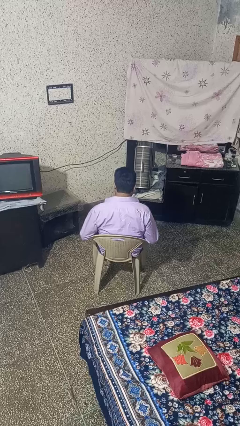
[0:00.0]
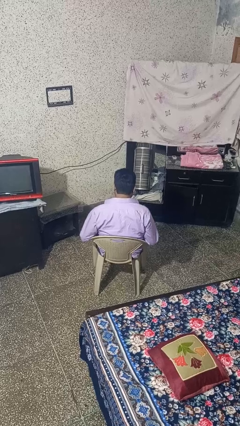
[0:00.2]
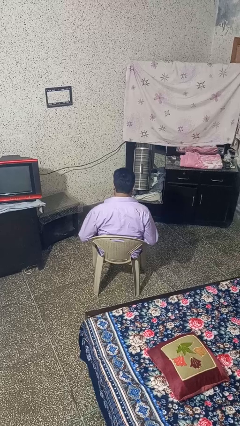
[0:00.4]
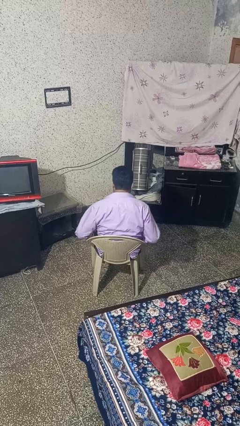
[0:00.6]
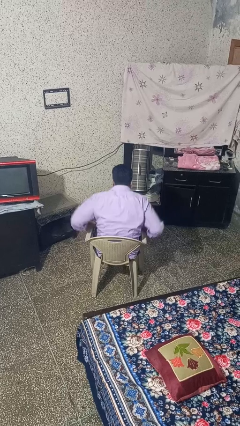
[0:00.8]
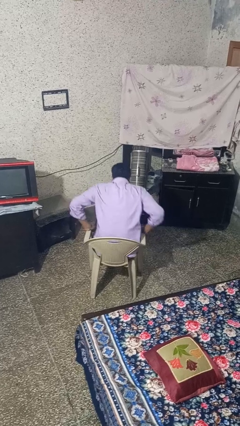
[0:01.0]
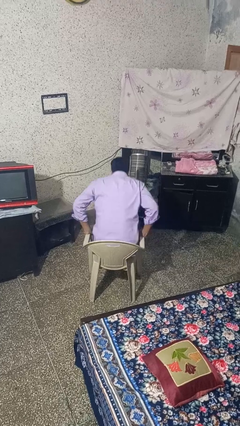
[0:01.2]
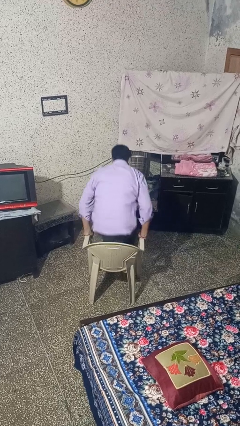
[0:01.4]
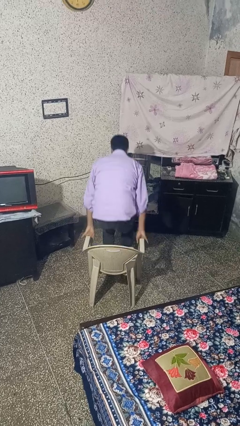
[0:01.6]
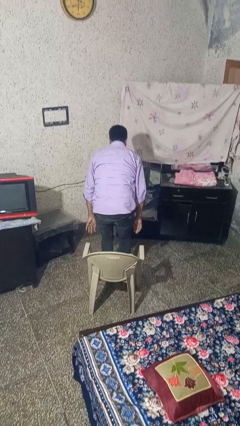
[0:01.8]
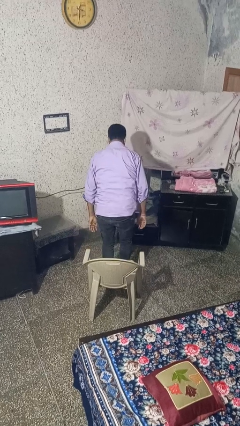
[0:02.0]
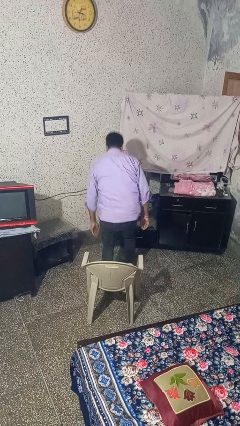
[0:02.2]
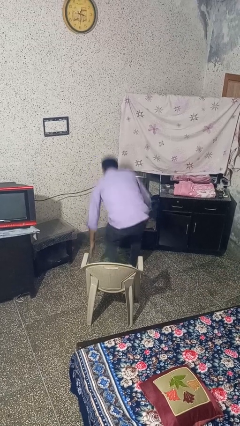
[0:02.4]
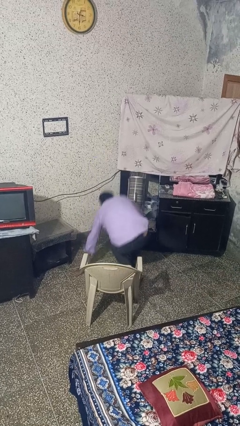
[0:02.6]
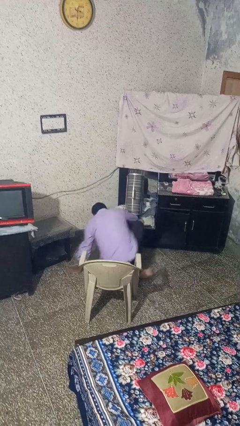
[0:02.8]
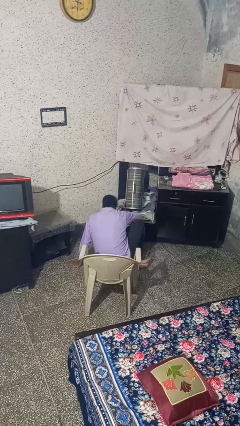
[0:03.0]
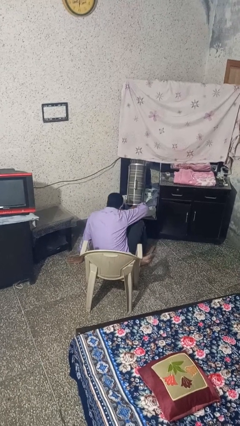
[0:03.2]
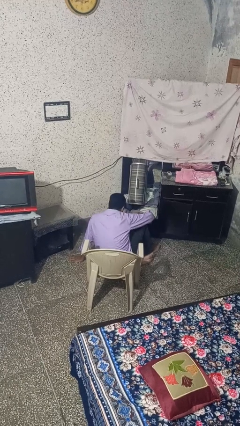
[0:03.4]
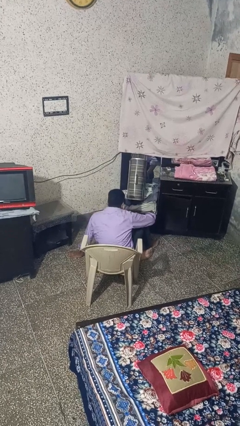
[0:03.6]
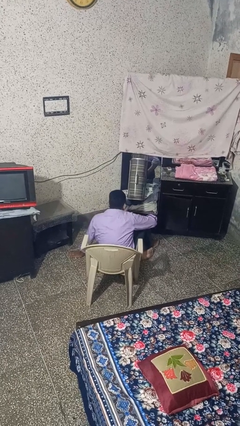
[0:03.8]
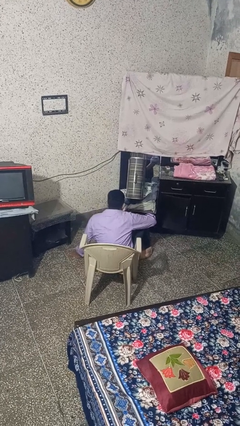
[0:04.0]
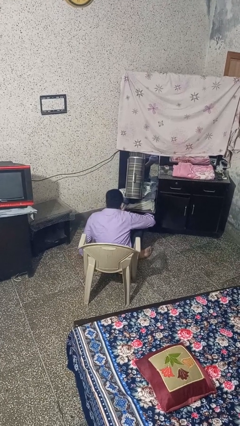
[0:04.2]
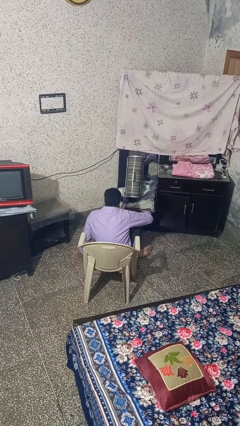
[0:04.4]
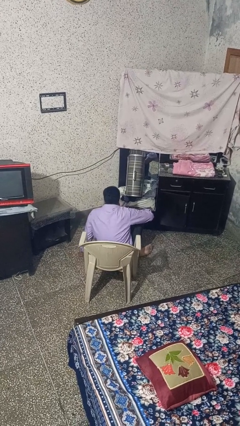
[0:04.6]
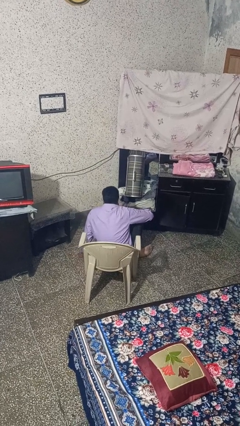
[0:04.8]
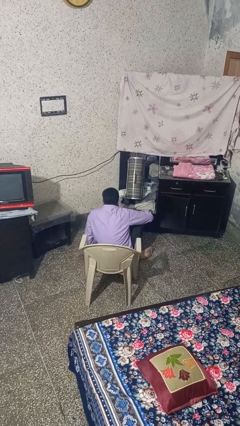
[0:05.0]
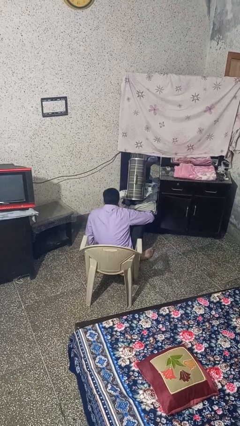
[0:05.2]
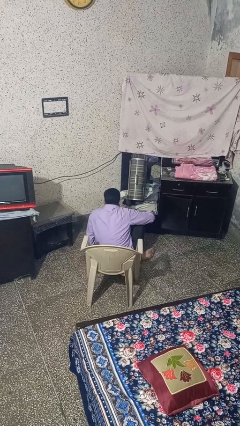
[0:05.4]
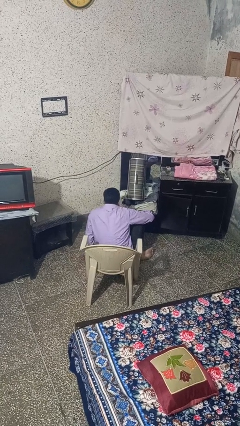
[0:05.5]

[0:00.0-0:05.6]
person falls from chair

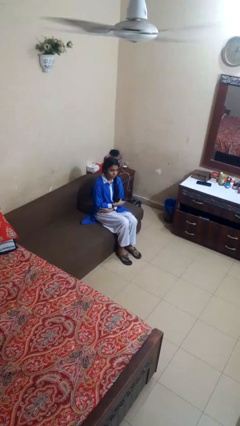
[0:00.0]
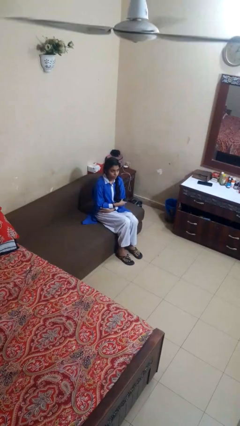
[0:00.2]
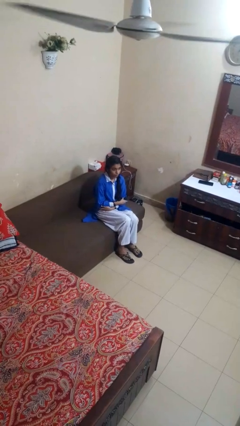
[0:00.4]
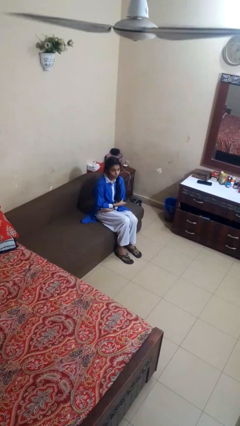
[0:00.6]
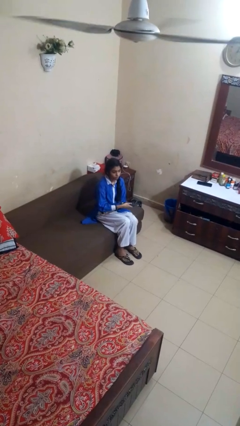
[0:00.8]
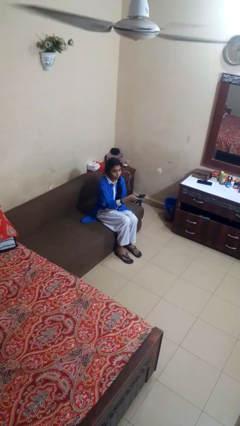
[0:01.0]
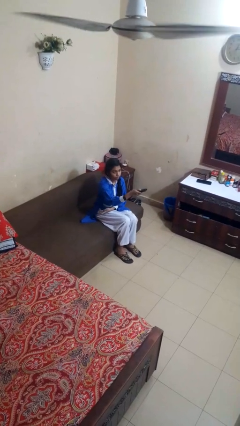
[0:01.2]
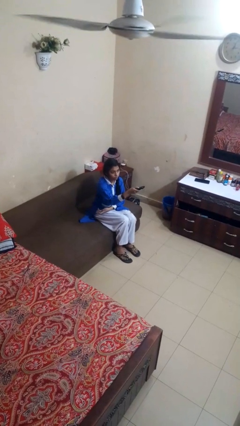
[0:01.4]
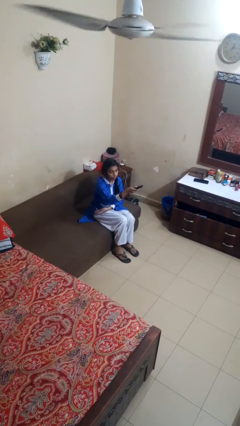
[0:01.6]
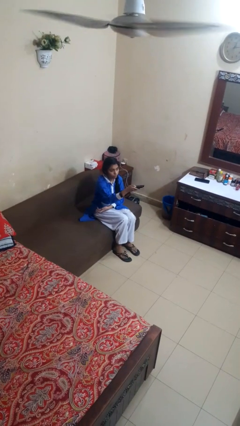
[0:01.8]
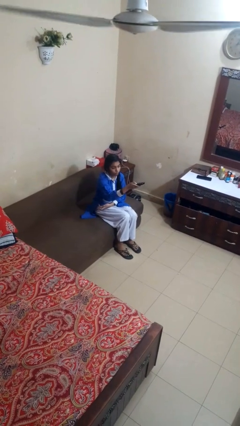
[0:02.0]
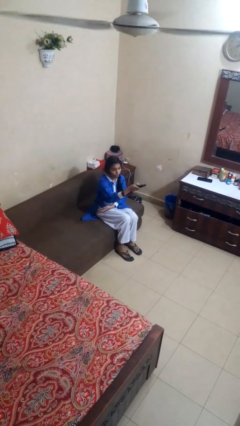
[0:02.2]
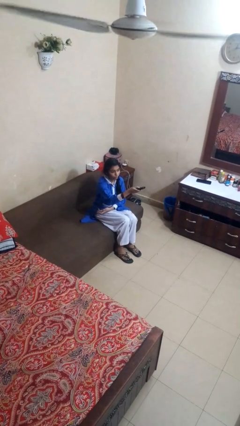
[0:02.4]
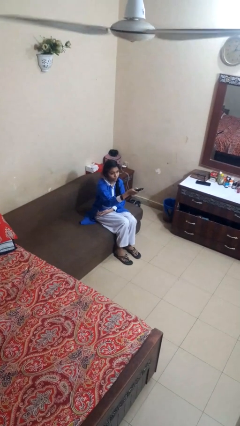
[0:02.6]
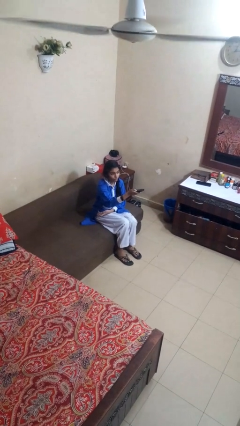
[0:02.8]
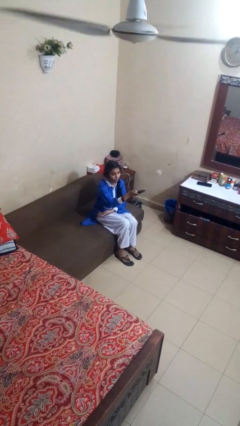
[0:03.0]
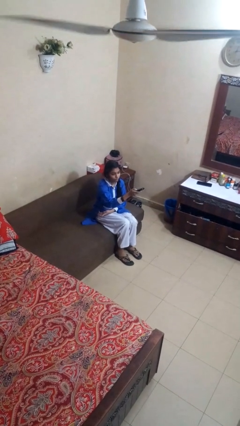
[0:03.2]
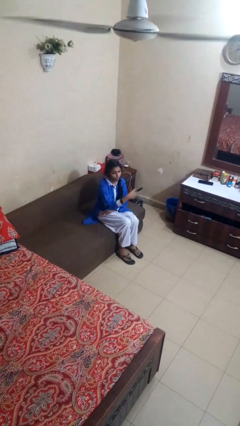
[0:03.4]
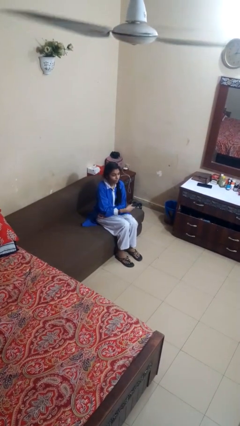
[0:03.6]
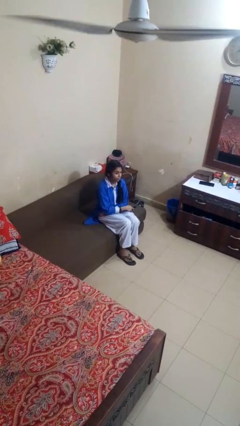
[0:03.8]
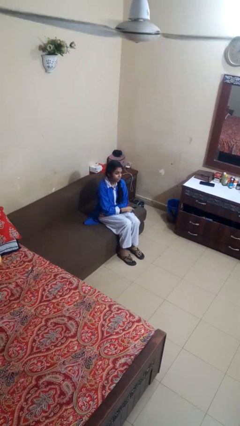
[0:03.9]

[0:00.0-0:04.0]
person uses television remote

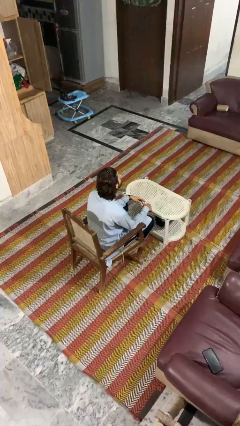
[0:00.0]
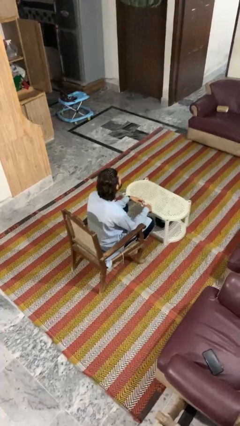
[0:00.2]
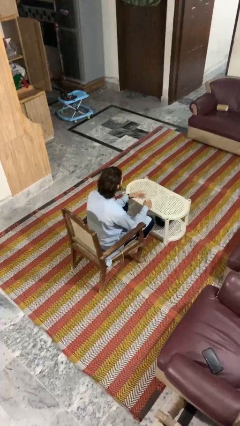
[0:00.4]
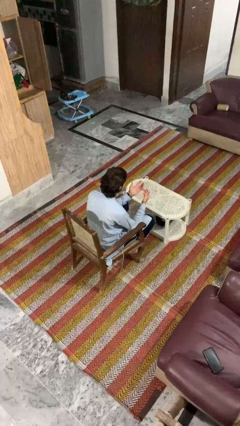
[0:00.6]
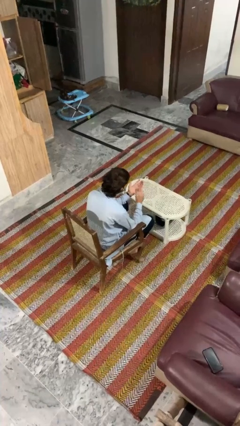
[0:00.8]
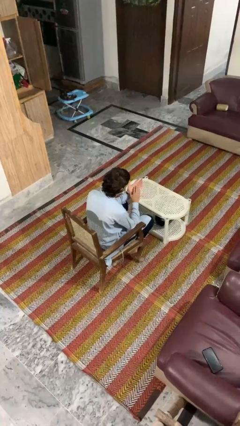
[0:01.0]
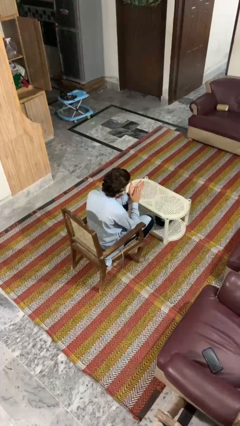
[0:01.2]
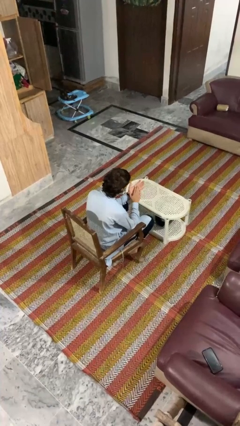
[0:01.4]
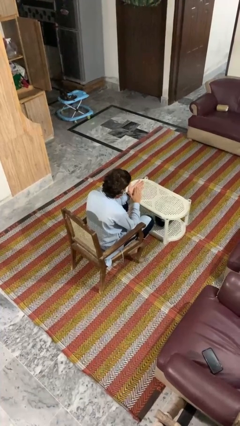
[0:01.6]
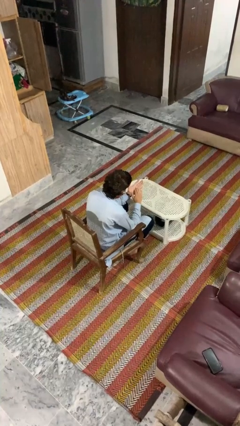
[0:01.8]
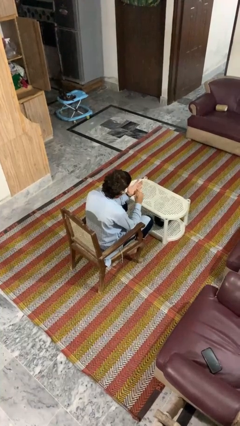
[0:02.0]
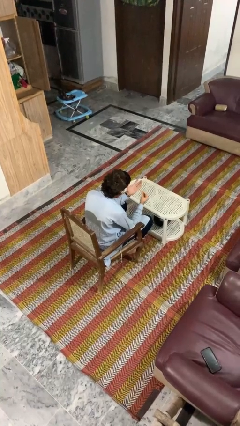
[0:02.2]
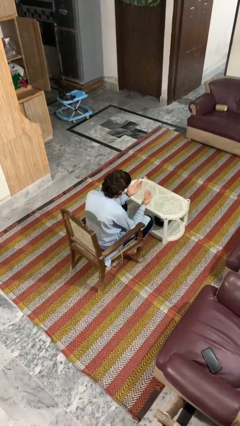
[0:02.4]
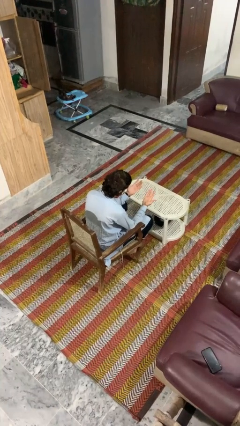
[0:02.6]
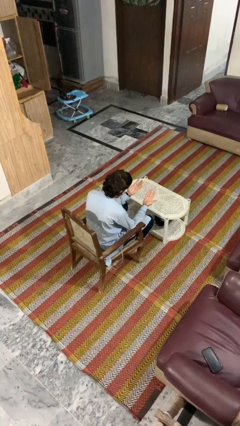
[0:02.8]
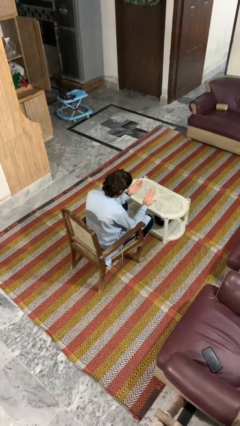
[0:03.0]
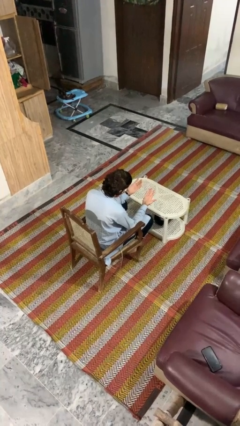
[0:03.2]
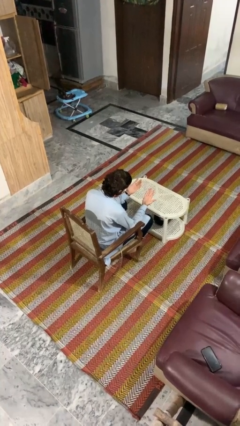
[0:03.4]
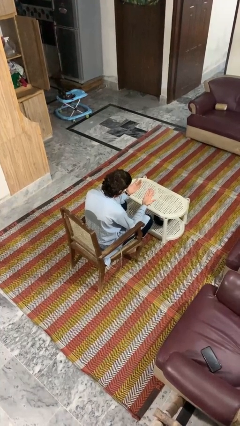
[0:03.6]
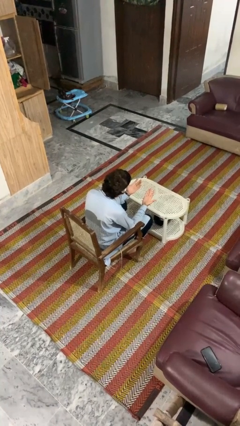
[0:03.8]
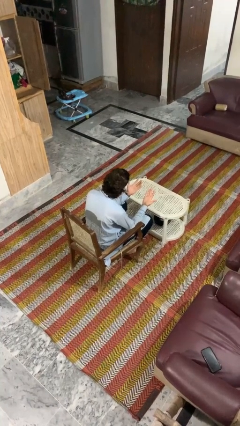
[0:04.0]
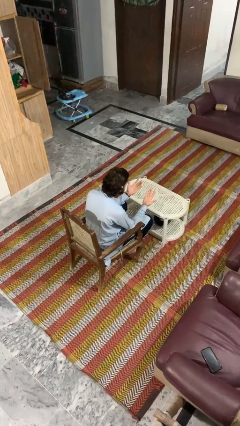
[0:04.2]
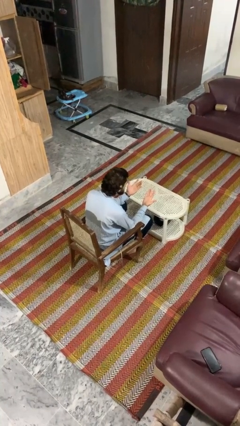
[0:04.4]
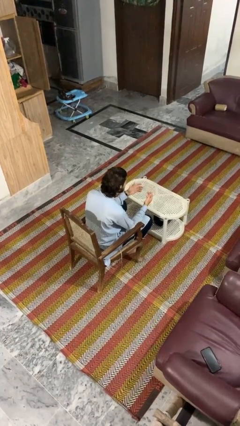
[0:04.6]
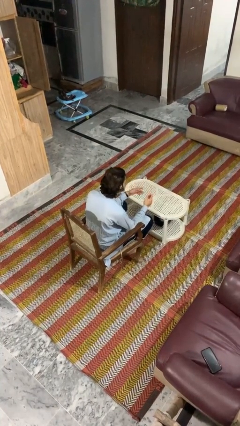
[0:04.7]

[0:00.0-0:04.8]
person looks at hands in lap

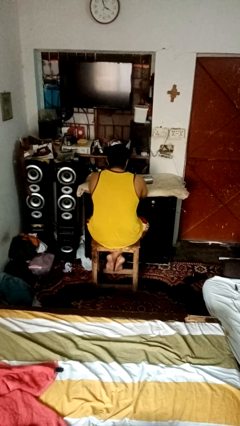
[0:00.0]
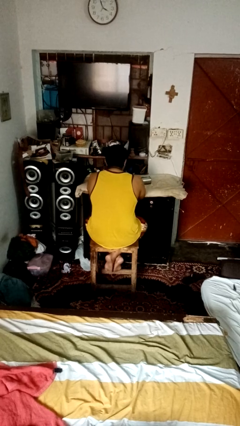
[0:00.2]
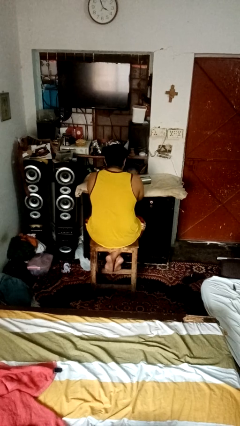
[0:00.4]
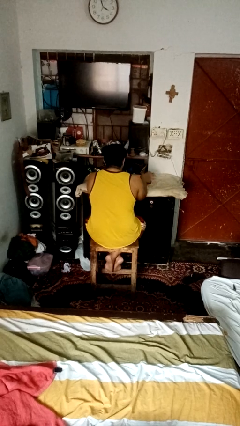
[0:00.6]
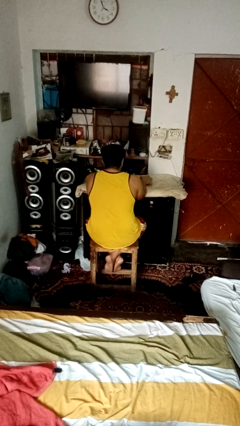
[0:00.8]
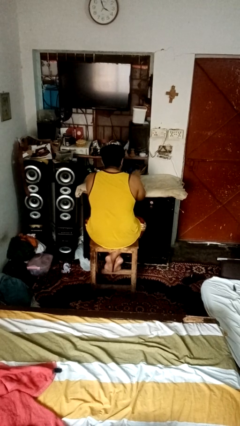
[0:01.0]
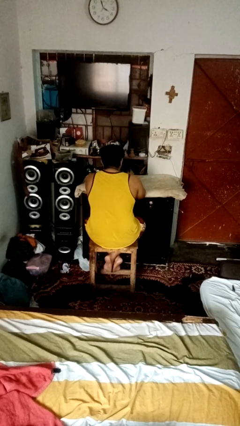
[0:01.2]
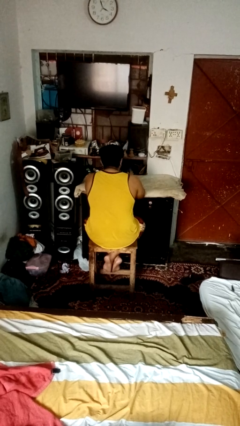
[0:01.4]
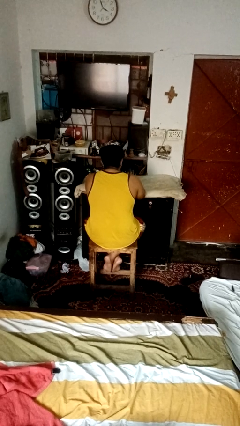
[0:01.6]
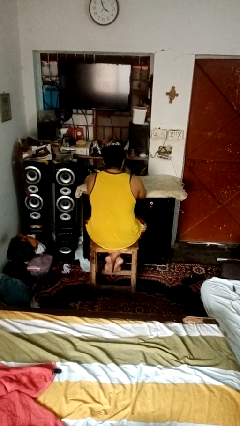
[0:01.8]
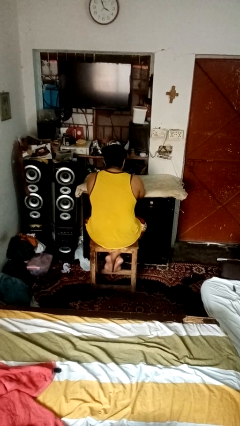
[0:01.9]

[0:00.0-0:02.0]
person sets upright glass

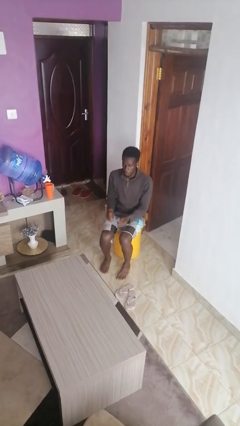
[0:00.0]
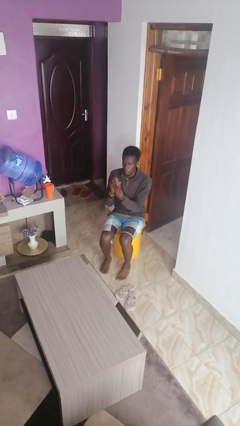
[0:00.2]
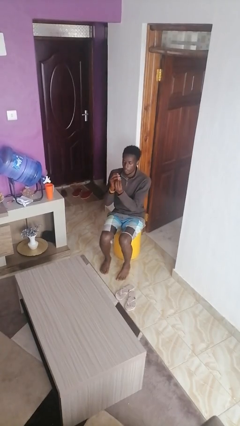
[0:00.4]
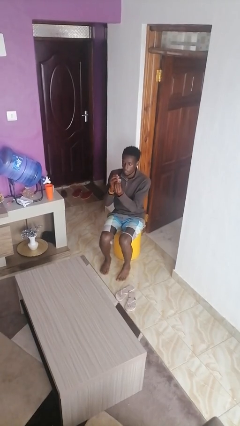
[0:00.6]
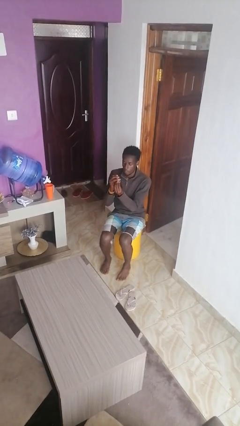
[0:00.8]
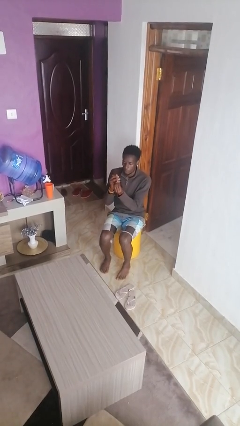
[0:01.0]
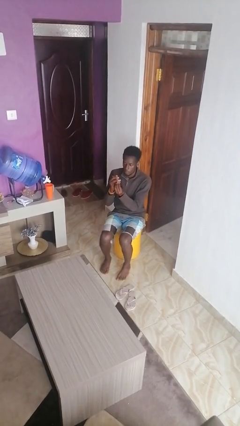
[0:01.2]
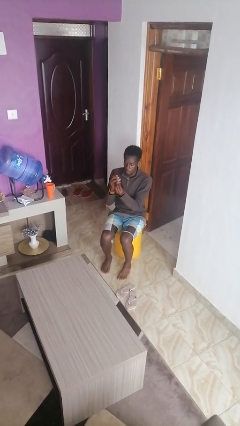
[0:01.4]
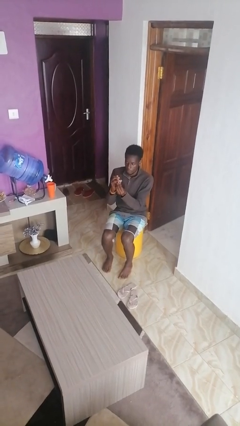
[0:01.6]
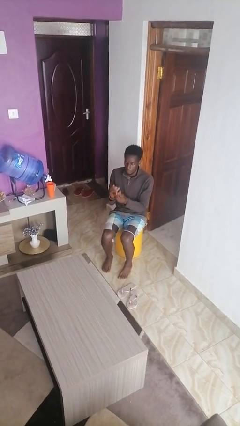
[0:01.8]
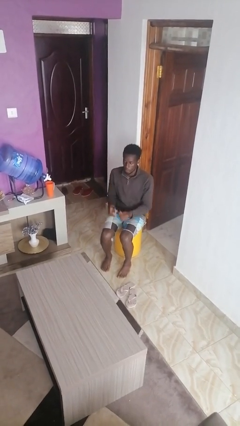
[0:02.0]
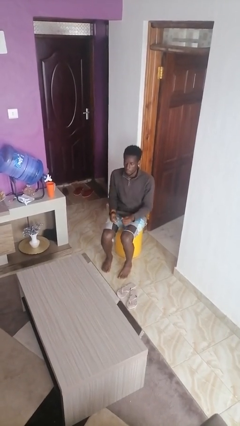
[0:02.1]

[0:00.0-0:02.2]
person clips fingernails
